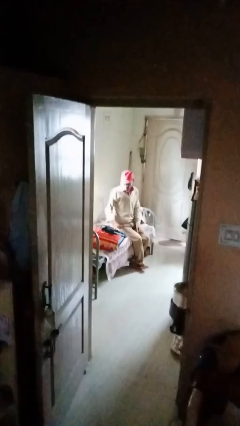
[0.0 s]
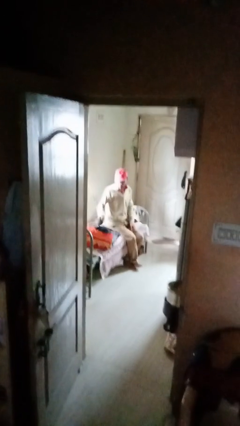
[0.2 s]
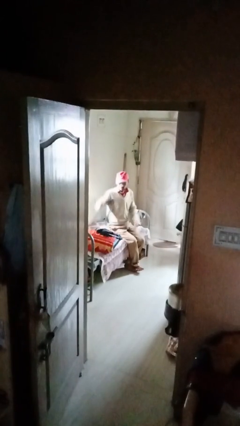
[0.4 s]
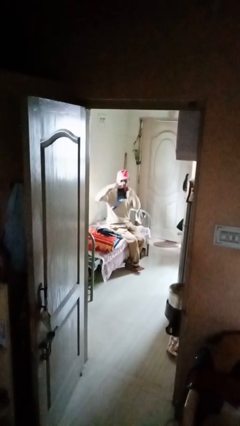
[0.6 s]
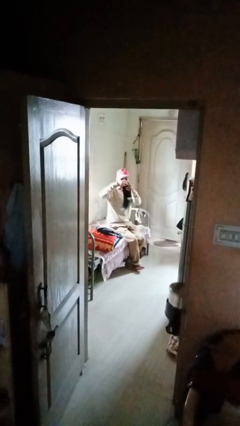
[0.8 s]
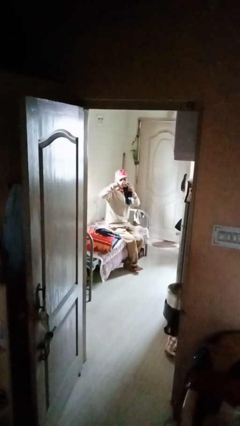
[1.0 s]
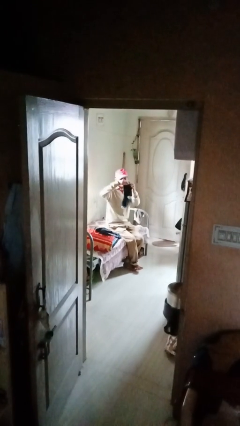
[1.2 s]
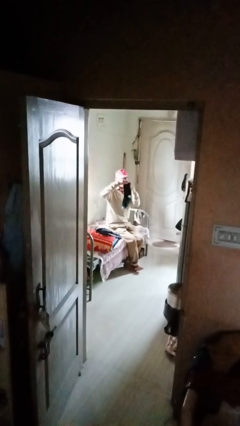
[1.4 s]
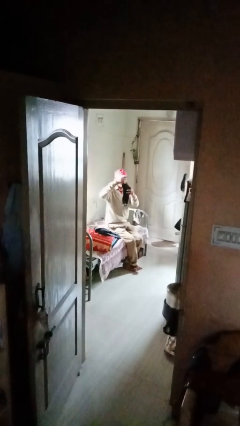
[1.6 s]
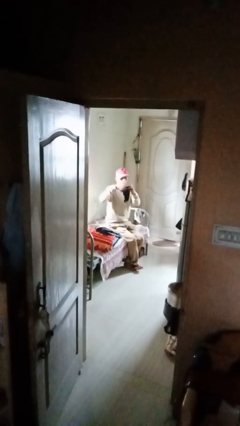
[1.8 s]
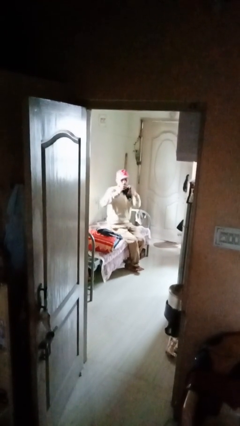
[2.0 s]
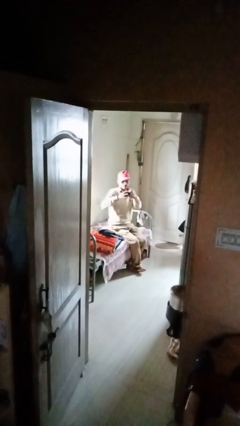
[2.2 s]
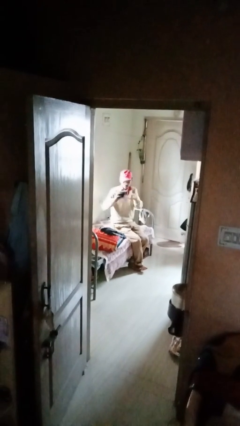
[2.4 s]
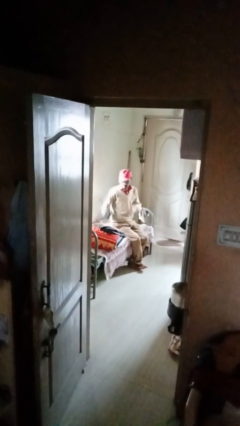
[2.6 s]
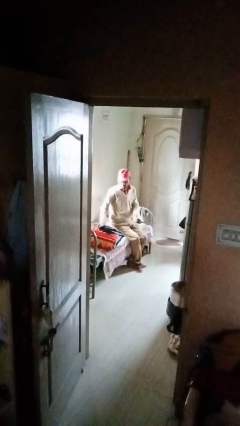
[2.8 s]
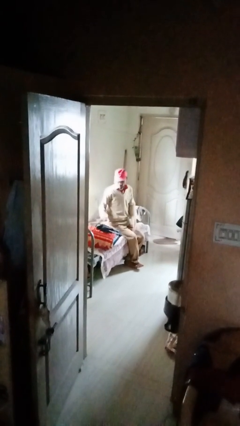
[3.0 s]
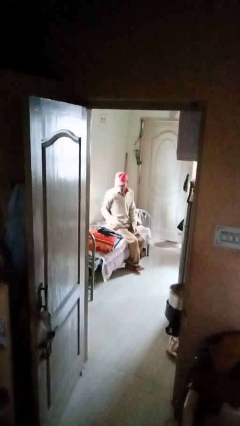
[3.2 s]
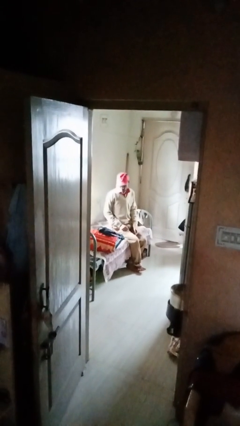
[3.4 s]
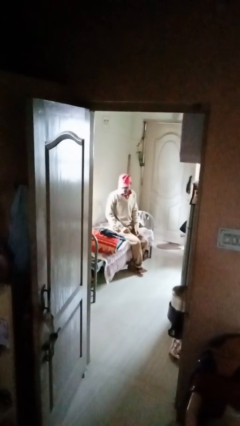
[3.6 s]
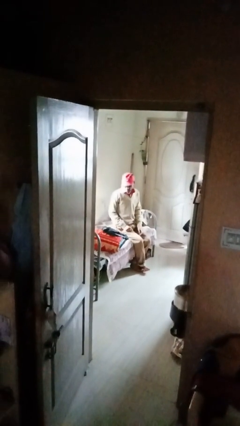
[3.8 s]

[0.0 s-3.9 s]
person folds socks

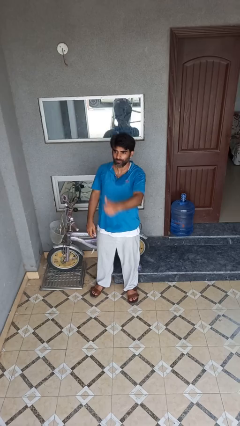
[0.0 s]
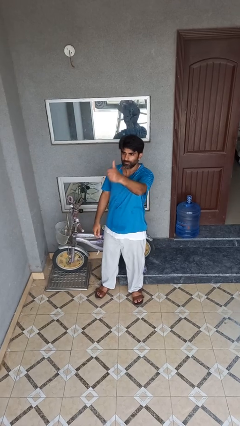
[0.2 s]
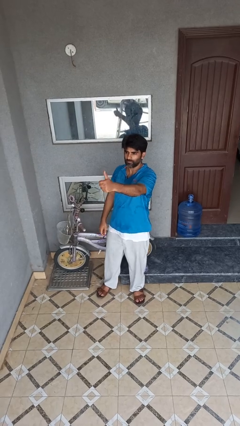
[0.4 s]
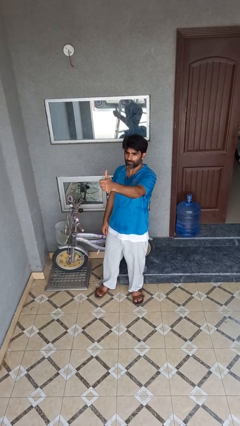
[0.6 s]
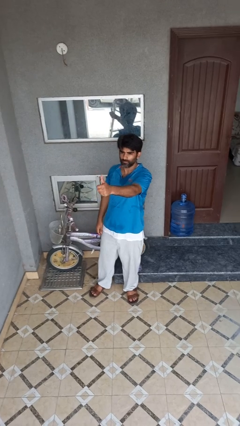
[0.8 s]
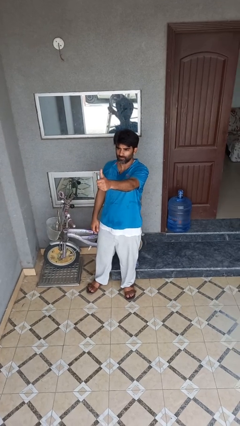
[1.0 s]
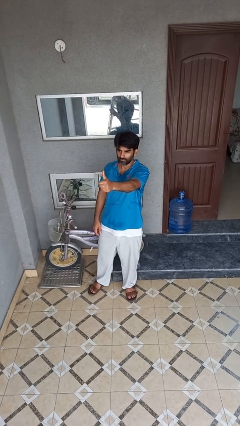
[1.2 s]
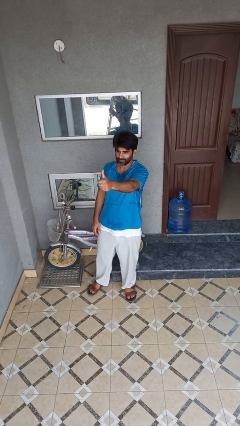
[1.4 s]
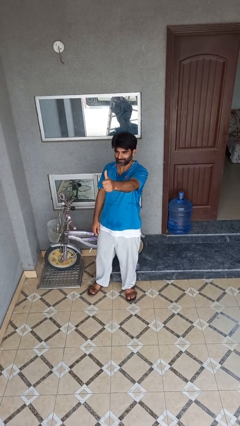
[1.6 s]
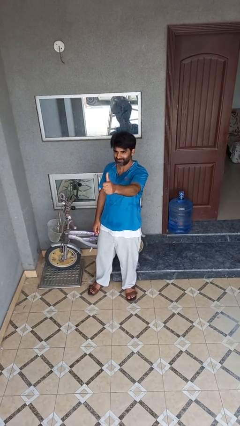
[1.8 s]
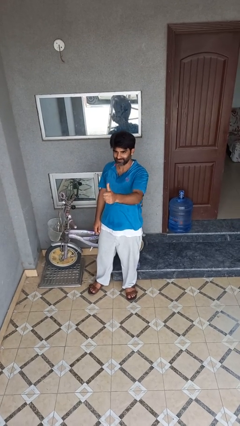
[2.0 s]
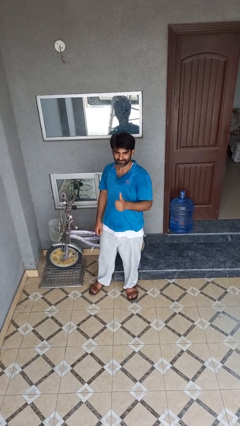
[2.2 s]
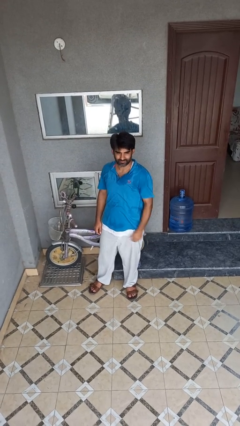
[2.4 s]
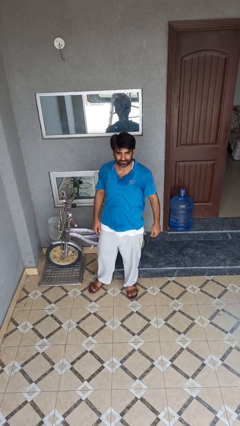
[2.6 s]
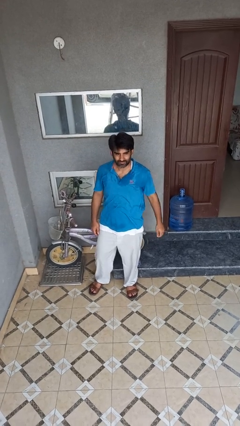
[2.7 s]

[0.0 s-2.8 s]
person gestures thumbs up

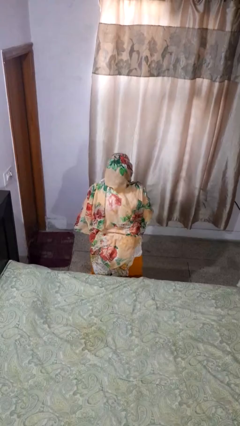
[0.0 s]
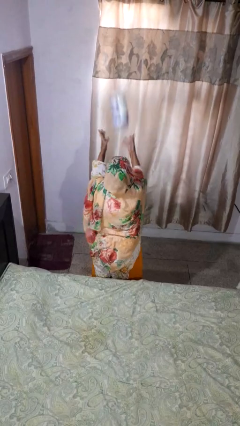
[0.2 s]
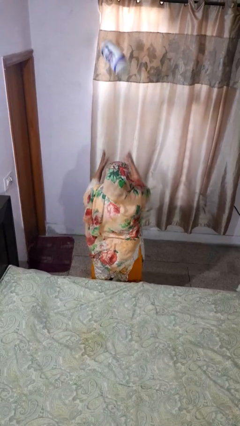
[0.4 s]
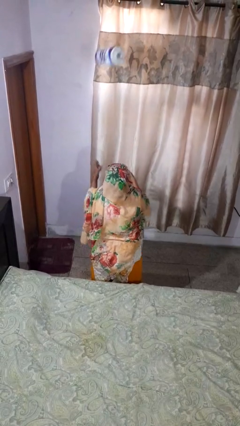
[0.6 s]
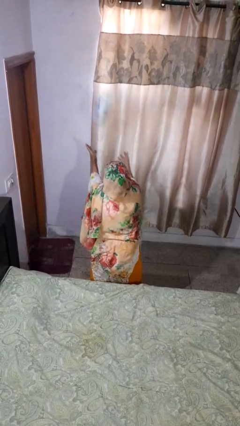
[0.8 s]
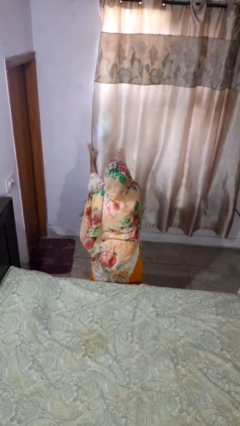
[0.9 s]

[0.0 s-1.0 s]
person drops object

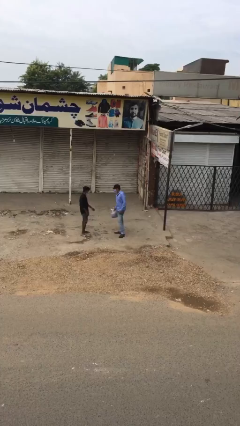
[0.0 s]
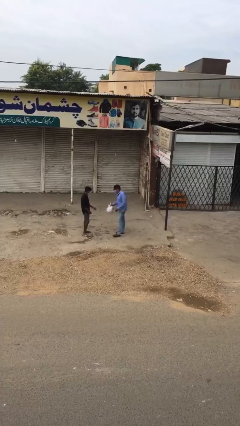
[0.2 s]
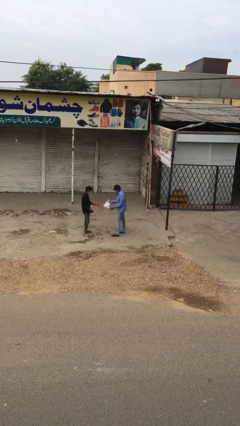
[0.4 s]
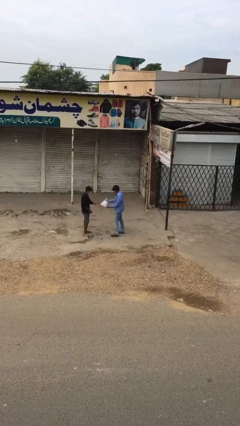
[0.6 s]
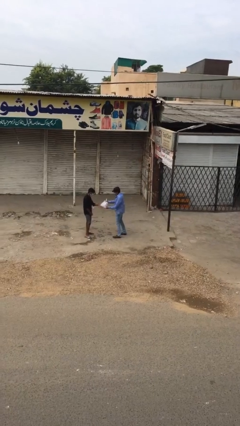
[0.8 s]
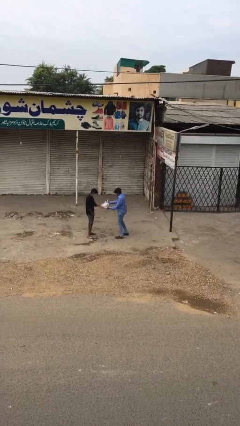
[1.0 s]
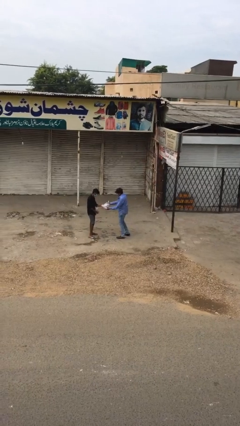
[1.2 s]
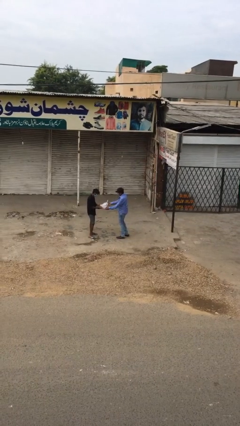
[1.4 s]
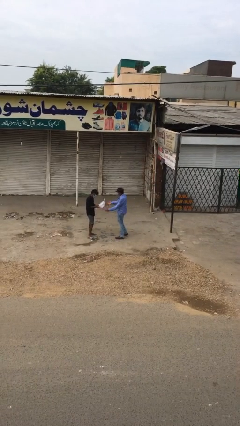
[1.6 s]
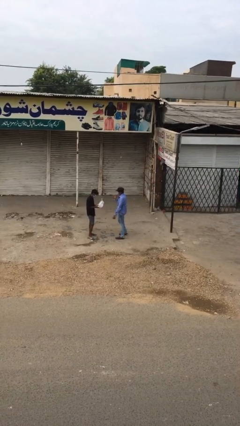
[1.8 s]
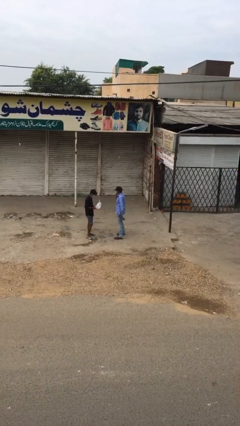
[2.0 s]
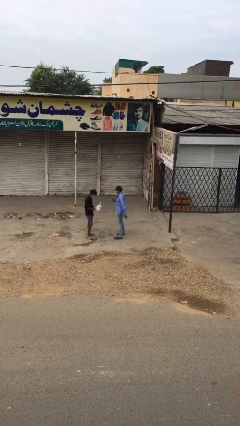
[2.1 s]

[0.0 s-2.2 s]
person transfers object to person

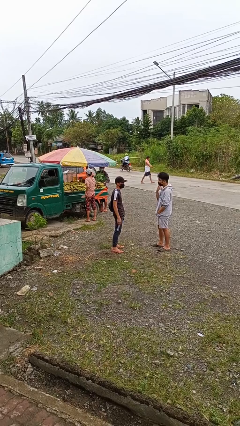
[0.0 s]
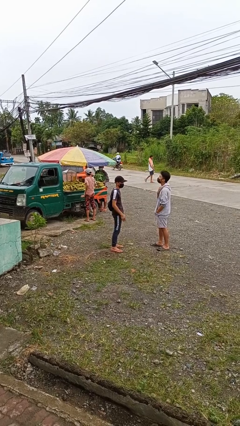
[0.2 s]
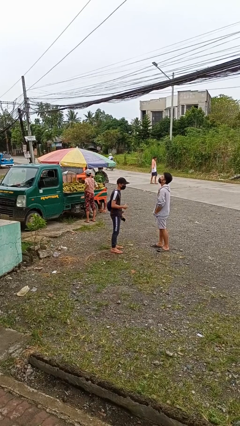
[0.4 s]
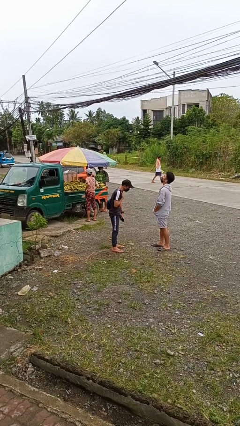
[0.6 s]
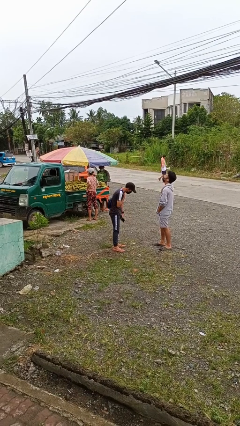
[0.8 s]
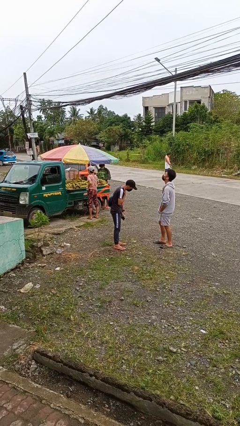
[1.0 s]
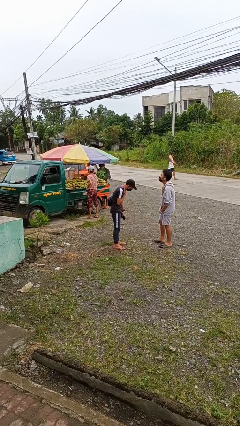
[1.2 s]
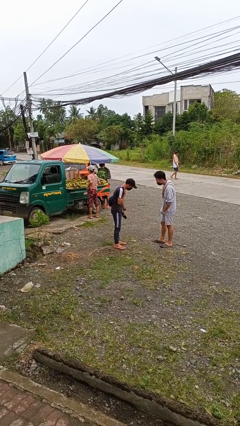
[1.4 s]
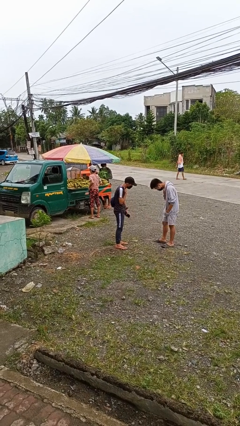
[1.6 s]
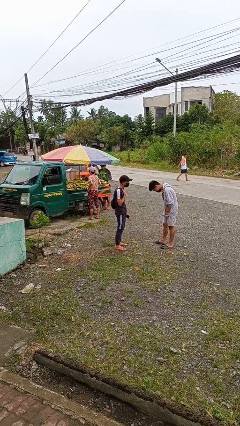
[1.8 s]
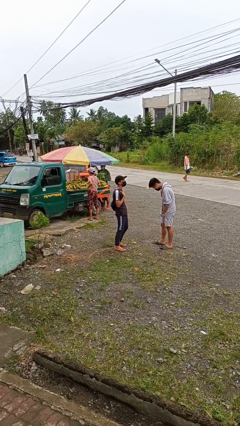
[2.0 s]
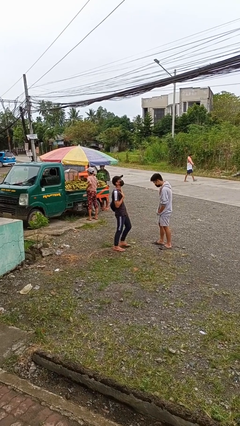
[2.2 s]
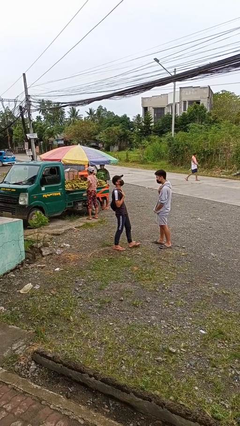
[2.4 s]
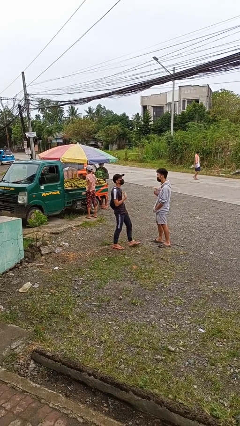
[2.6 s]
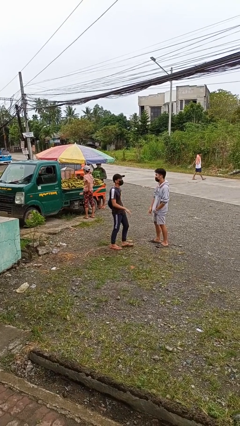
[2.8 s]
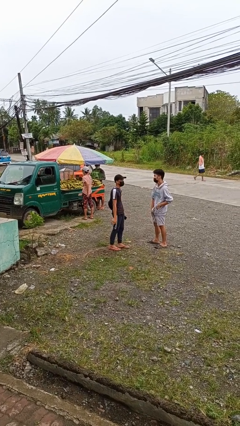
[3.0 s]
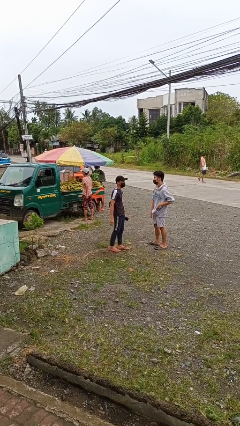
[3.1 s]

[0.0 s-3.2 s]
person laughs with person

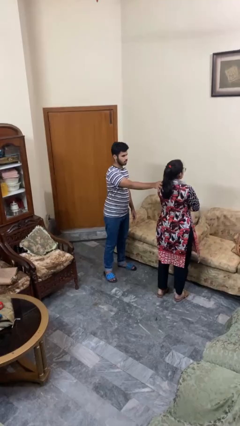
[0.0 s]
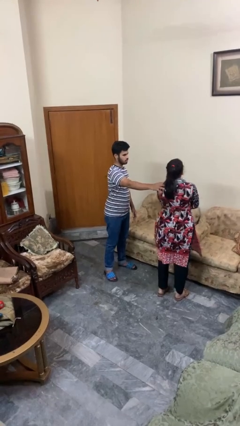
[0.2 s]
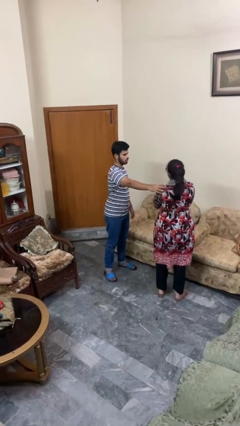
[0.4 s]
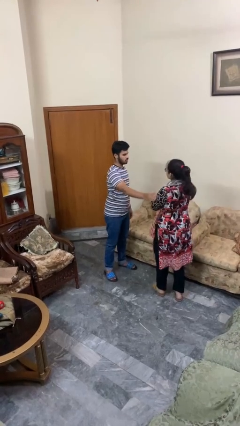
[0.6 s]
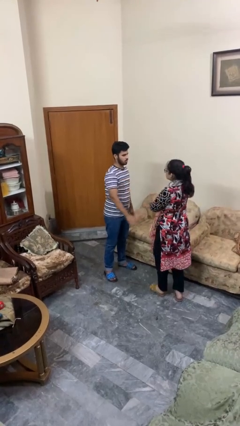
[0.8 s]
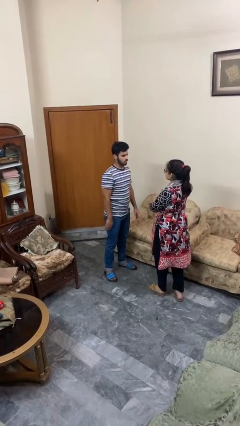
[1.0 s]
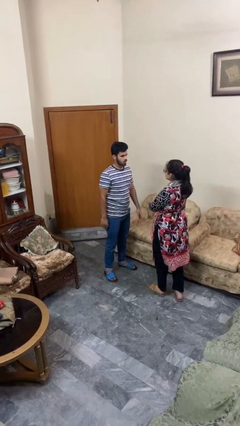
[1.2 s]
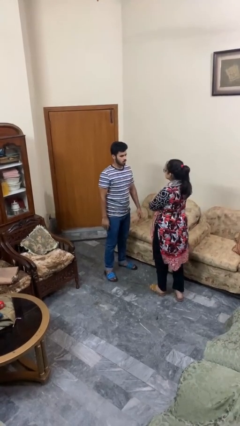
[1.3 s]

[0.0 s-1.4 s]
person spins person around

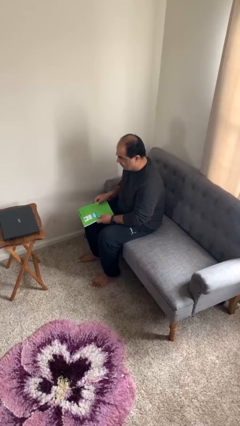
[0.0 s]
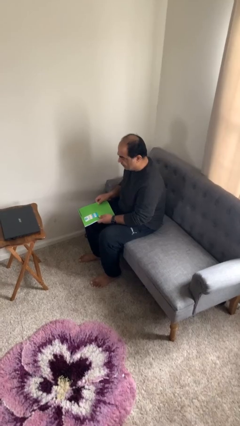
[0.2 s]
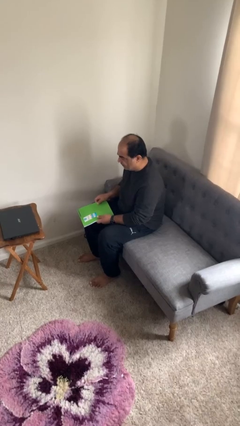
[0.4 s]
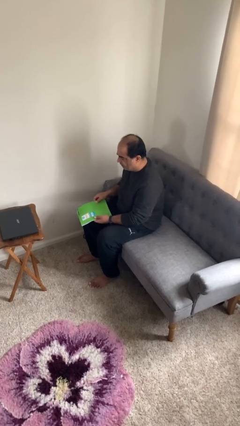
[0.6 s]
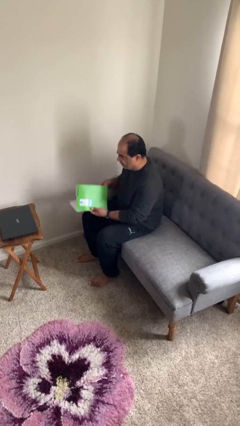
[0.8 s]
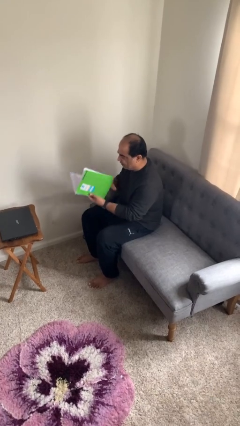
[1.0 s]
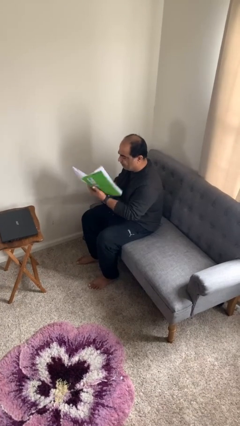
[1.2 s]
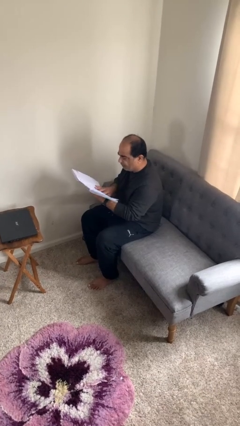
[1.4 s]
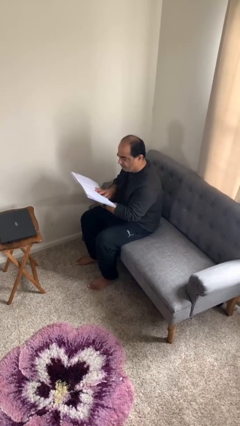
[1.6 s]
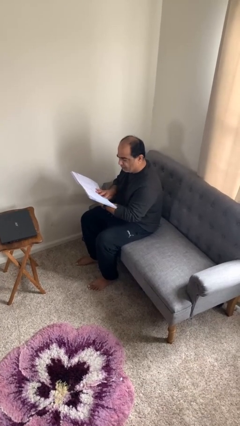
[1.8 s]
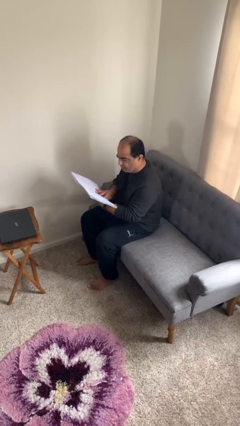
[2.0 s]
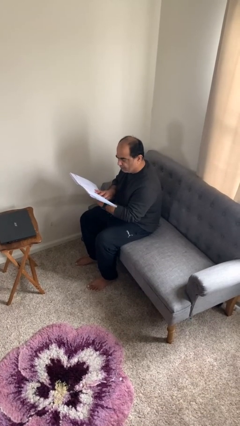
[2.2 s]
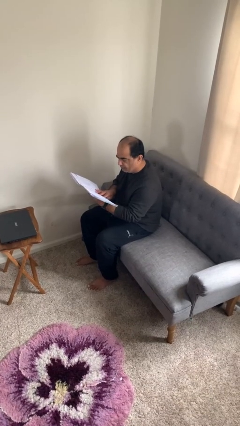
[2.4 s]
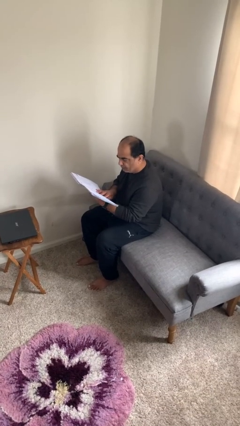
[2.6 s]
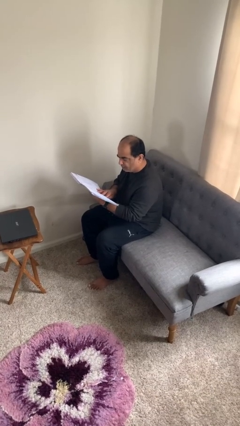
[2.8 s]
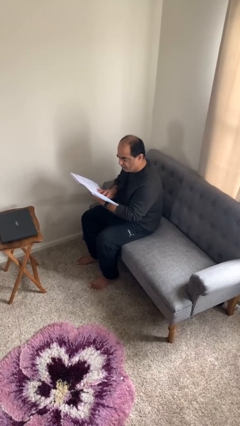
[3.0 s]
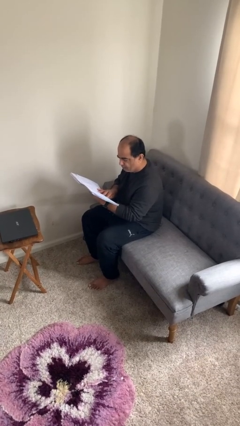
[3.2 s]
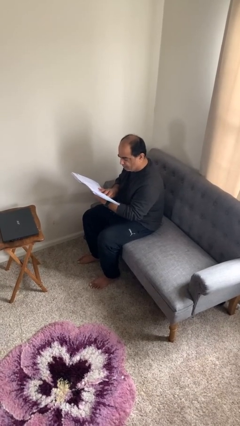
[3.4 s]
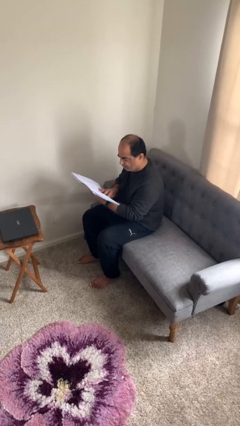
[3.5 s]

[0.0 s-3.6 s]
person reads document
